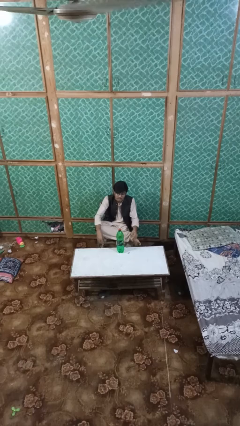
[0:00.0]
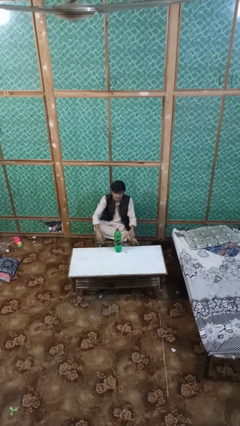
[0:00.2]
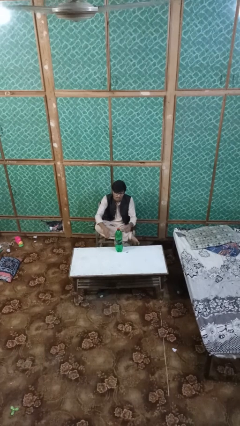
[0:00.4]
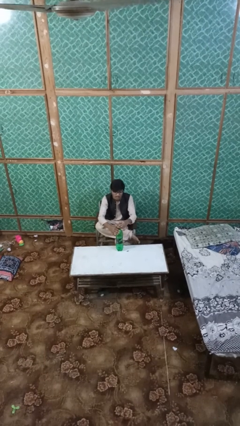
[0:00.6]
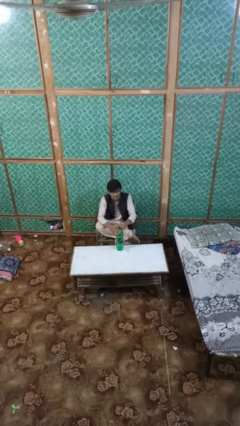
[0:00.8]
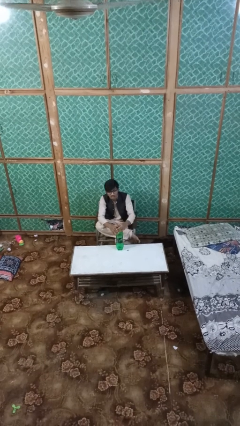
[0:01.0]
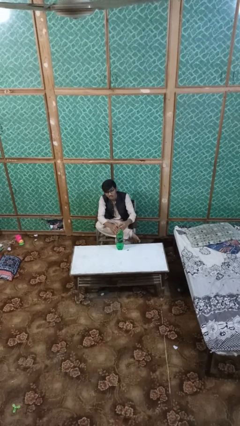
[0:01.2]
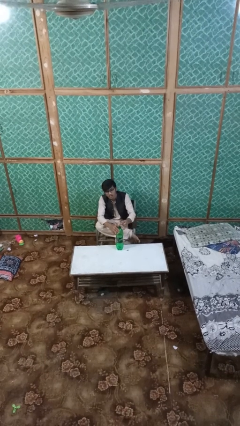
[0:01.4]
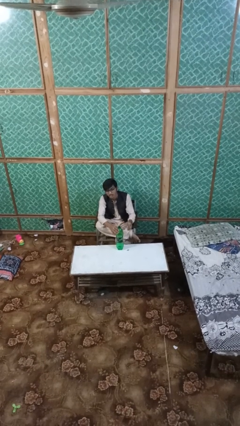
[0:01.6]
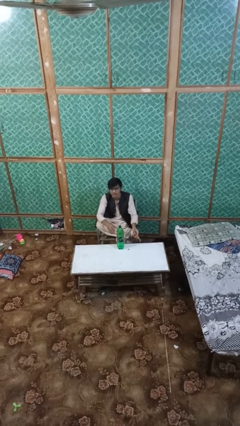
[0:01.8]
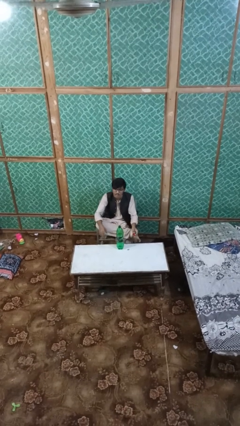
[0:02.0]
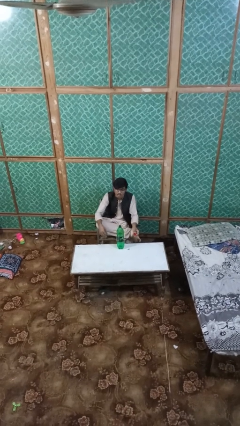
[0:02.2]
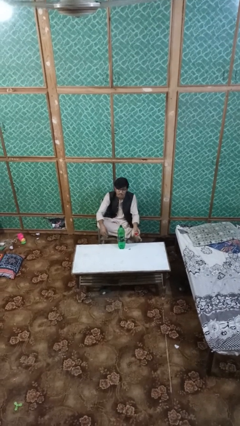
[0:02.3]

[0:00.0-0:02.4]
person unscrews lid from bottle

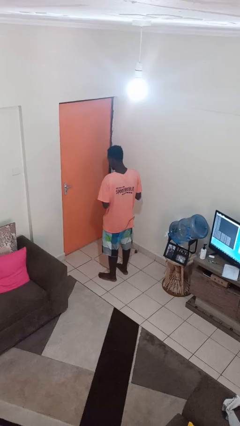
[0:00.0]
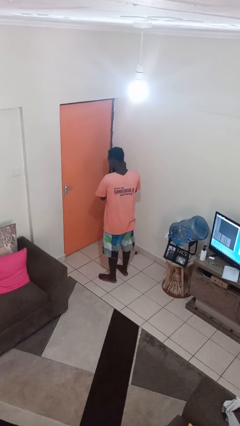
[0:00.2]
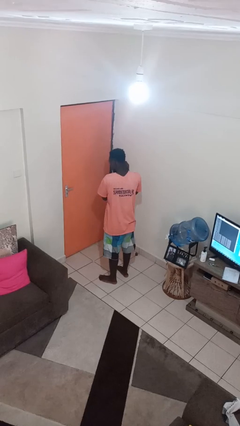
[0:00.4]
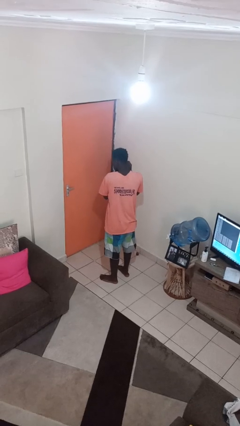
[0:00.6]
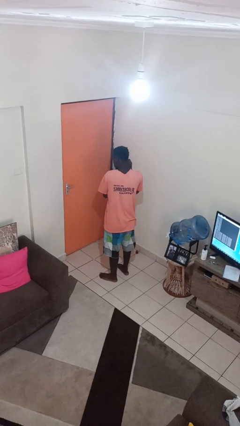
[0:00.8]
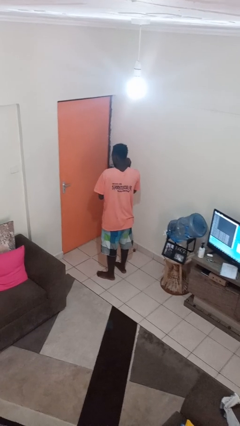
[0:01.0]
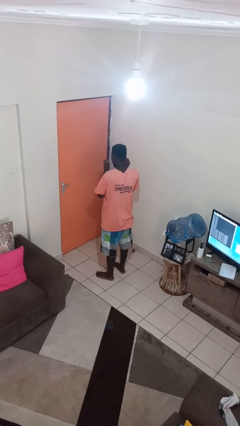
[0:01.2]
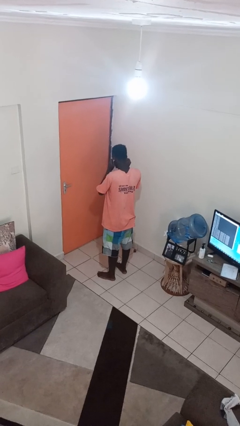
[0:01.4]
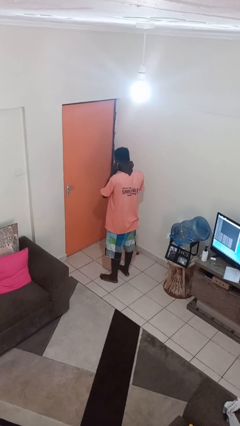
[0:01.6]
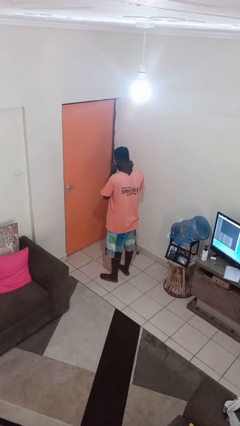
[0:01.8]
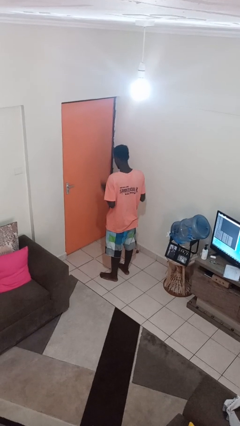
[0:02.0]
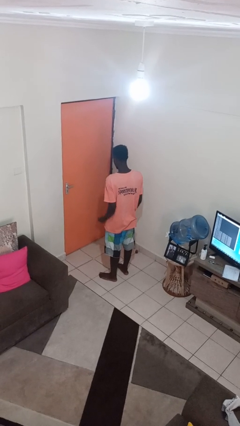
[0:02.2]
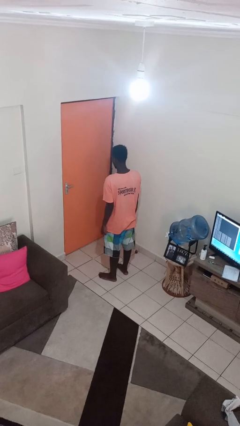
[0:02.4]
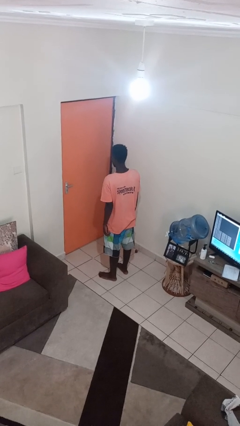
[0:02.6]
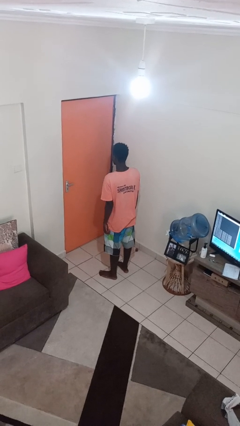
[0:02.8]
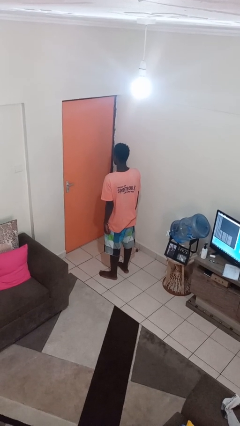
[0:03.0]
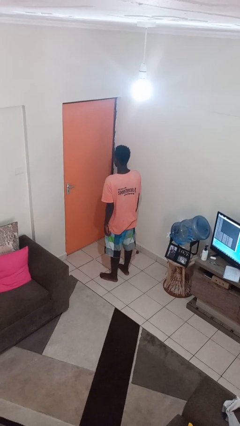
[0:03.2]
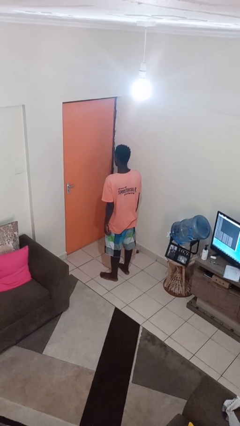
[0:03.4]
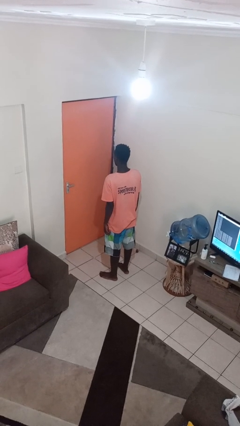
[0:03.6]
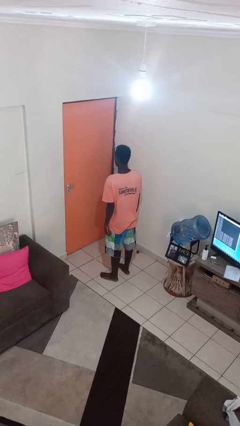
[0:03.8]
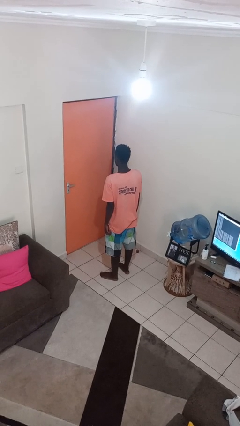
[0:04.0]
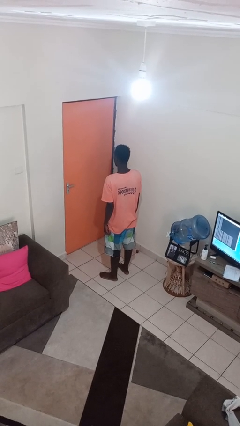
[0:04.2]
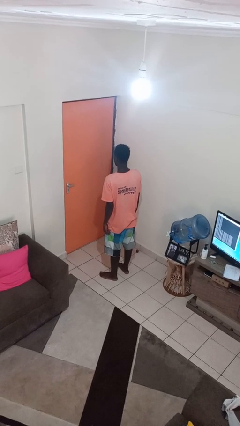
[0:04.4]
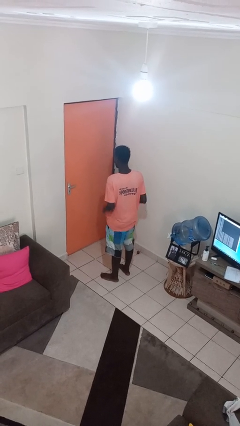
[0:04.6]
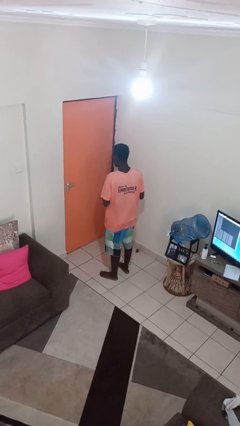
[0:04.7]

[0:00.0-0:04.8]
person puts on earrings

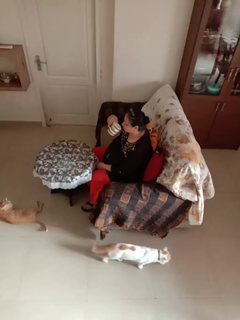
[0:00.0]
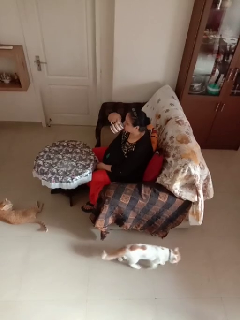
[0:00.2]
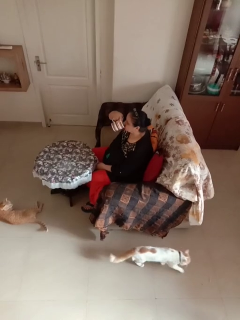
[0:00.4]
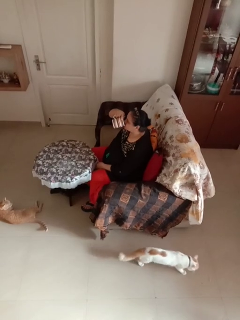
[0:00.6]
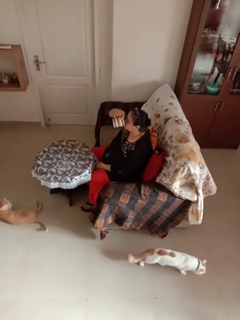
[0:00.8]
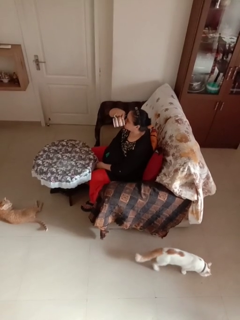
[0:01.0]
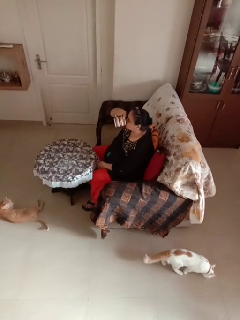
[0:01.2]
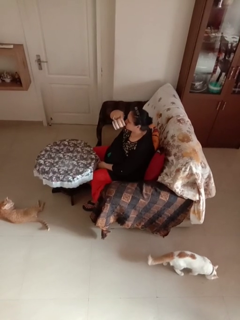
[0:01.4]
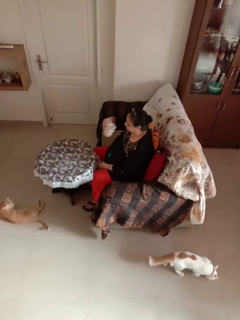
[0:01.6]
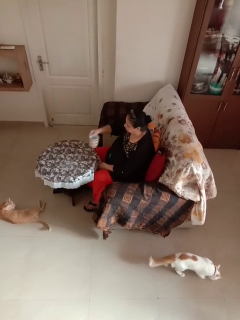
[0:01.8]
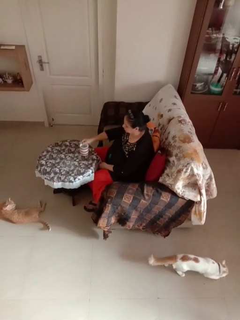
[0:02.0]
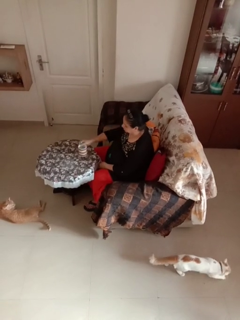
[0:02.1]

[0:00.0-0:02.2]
person drinks from mug

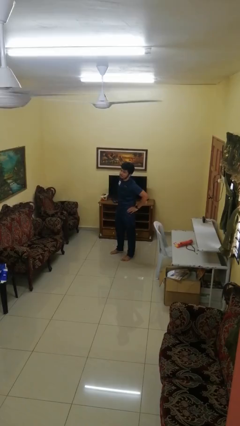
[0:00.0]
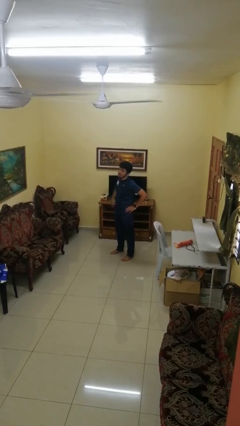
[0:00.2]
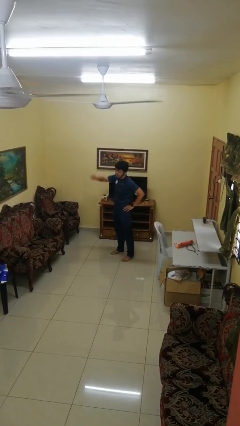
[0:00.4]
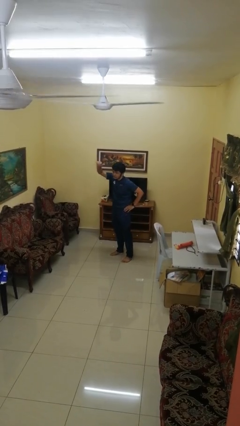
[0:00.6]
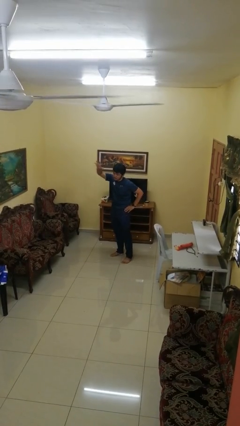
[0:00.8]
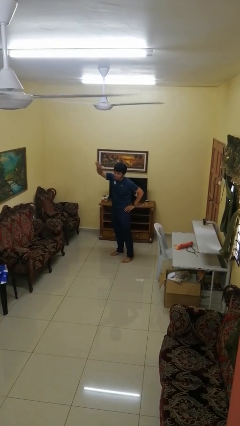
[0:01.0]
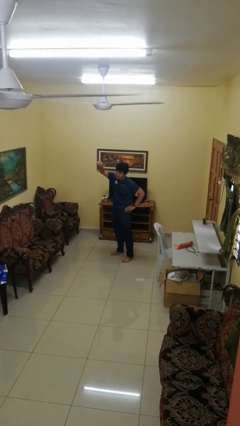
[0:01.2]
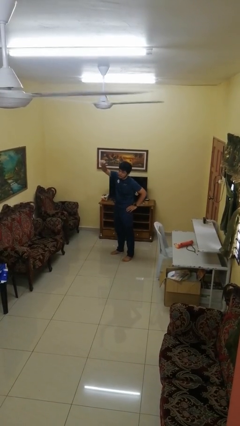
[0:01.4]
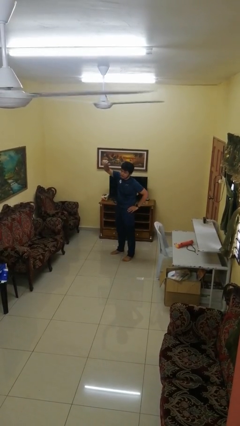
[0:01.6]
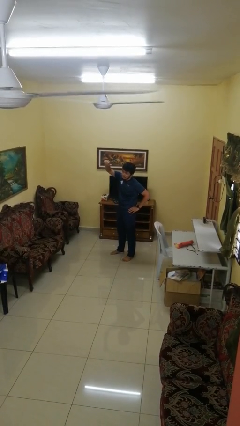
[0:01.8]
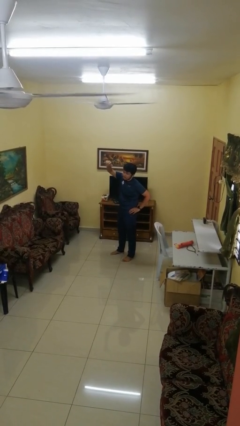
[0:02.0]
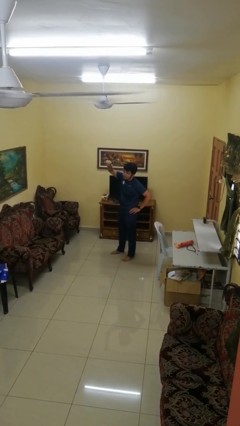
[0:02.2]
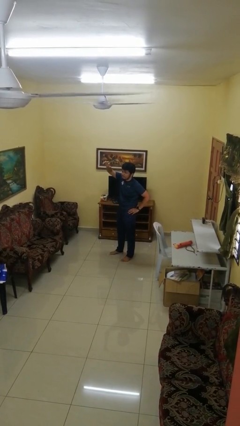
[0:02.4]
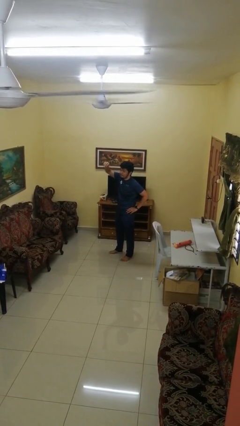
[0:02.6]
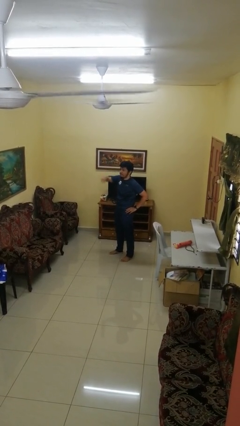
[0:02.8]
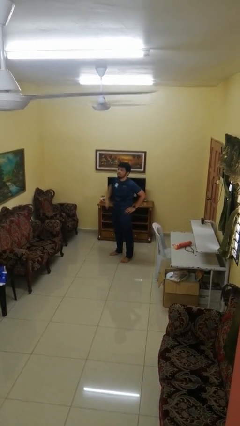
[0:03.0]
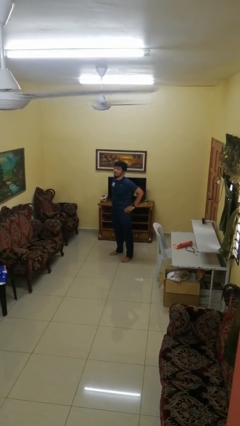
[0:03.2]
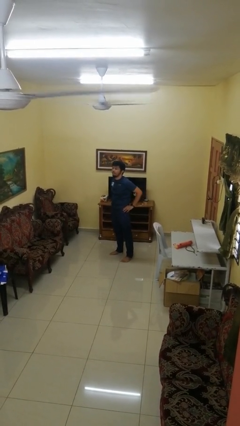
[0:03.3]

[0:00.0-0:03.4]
person gestures come here

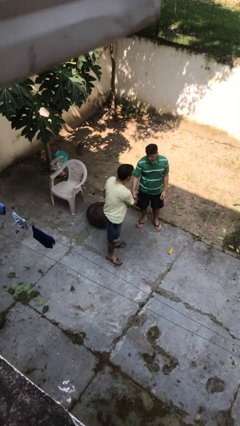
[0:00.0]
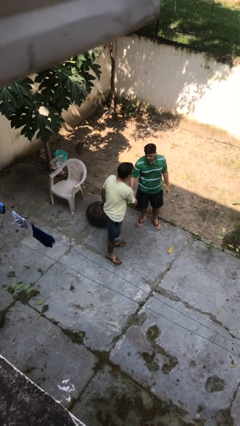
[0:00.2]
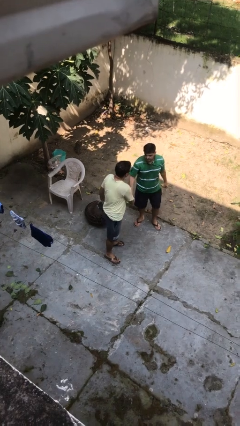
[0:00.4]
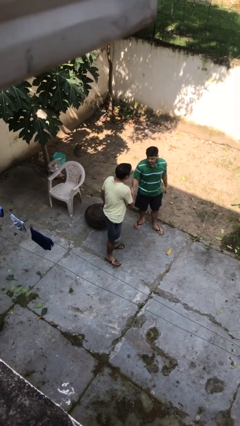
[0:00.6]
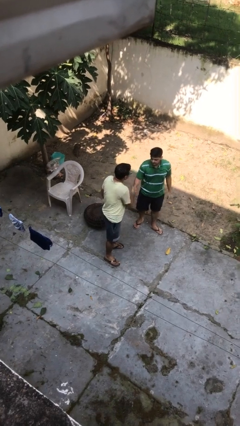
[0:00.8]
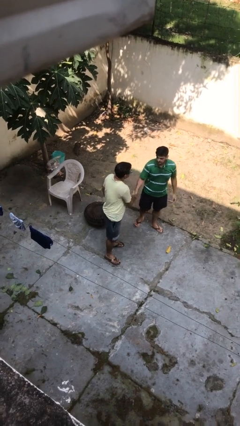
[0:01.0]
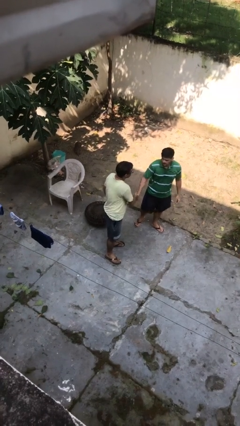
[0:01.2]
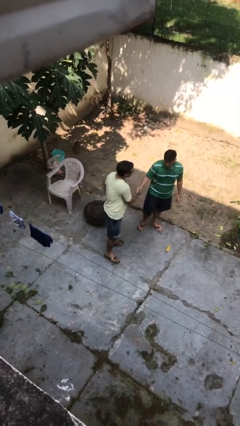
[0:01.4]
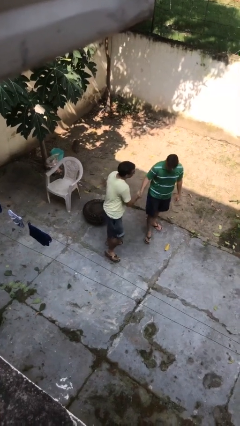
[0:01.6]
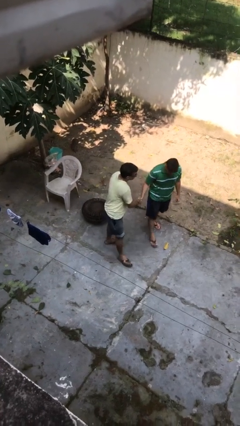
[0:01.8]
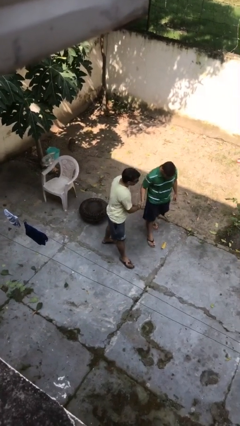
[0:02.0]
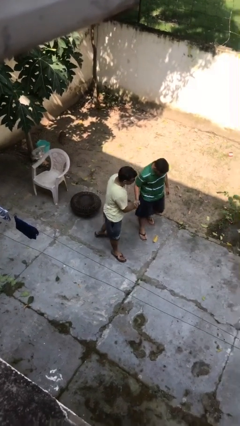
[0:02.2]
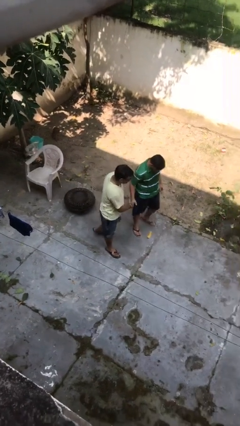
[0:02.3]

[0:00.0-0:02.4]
person shakes hand

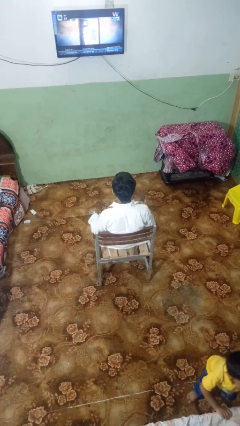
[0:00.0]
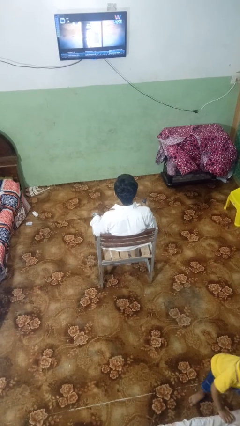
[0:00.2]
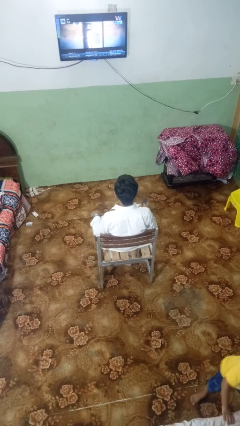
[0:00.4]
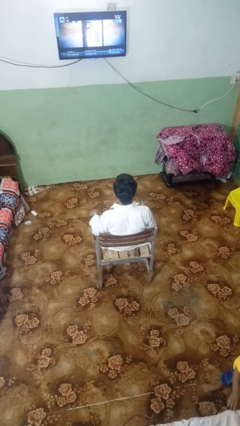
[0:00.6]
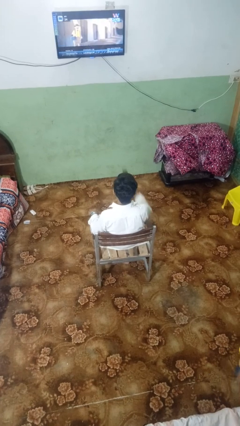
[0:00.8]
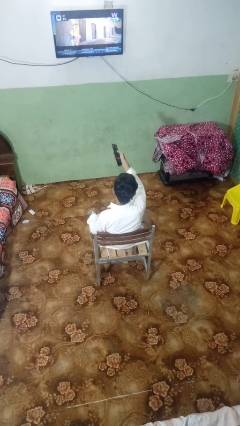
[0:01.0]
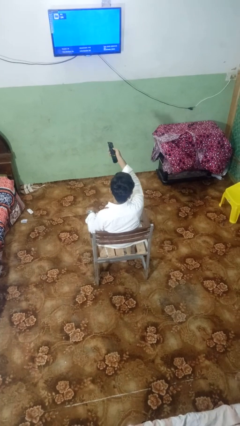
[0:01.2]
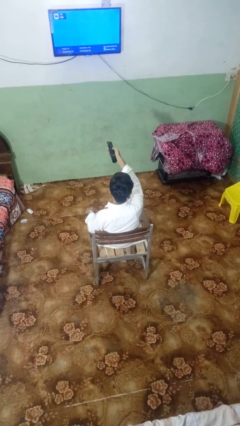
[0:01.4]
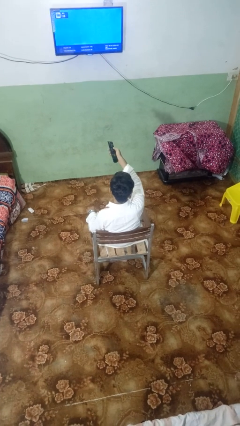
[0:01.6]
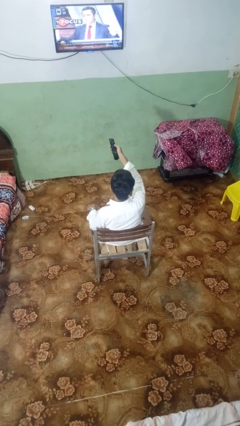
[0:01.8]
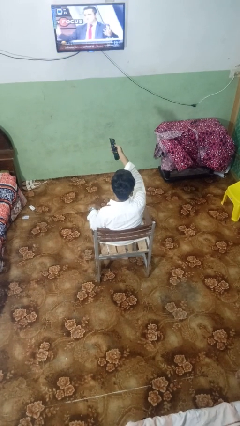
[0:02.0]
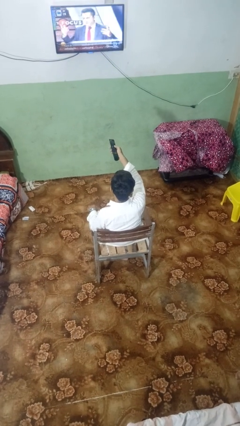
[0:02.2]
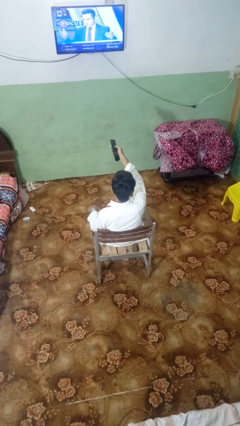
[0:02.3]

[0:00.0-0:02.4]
person uses television remote

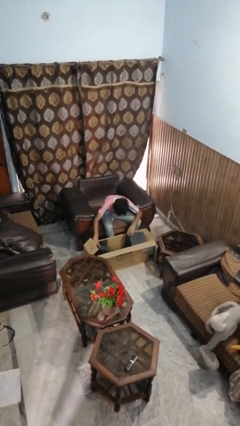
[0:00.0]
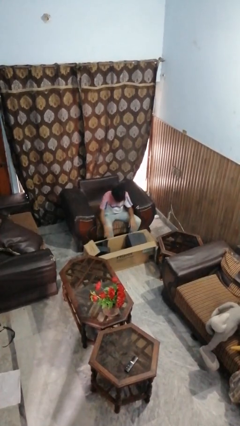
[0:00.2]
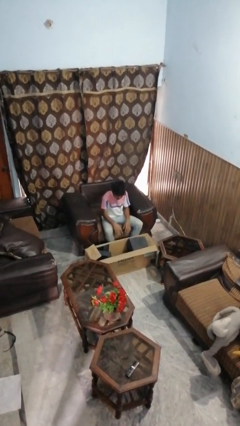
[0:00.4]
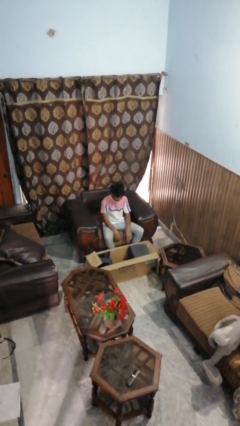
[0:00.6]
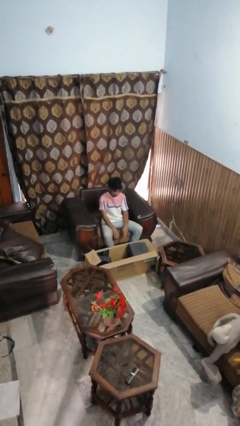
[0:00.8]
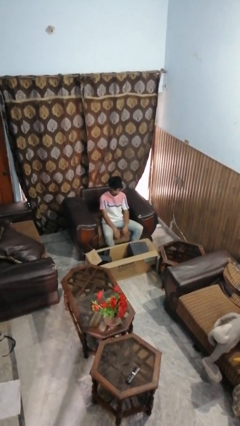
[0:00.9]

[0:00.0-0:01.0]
person searches in box
